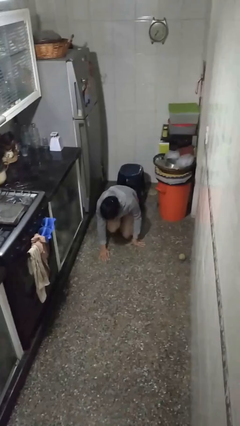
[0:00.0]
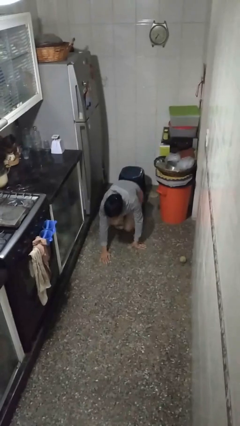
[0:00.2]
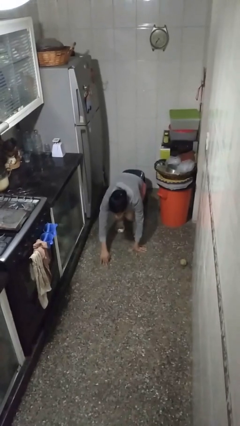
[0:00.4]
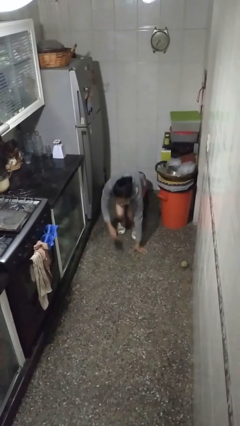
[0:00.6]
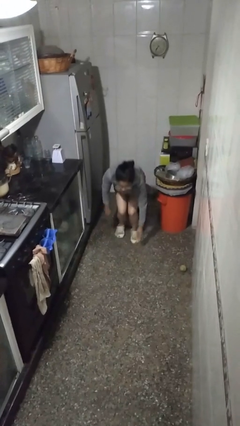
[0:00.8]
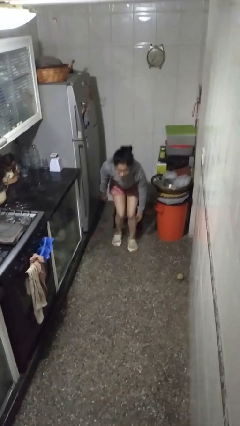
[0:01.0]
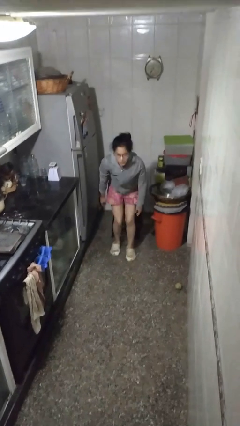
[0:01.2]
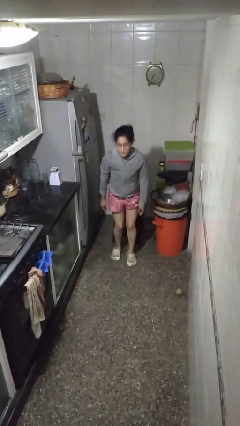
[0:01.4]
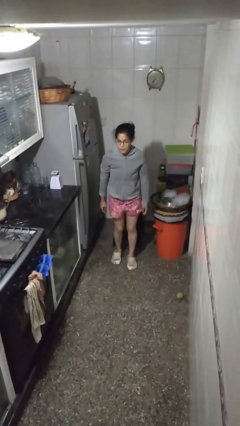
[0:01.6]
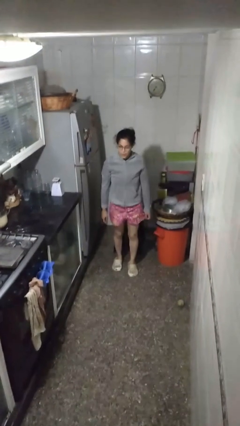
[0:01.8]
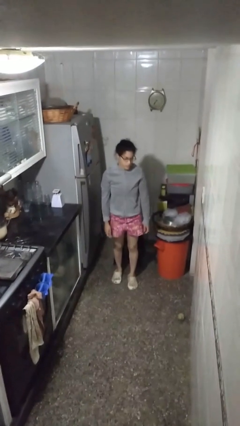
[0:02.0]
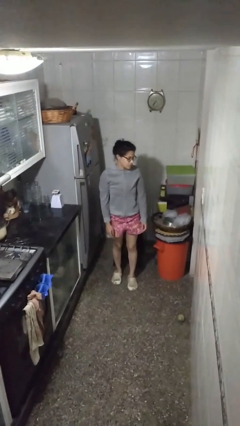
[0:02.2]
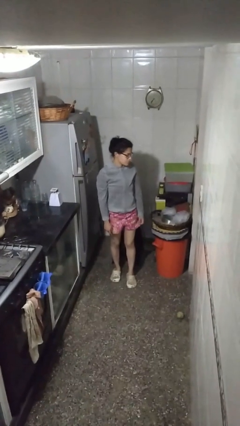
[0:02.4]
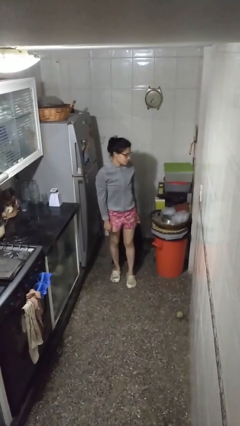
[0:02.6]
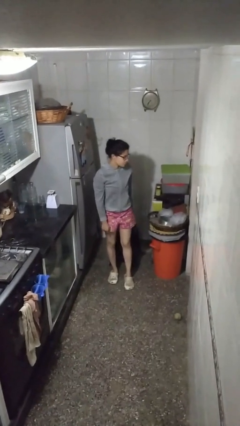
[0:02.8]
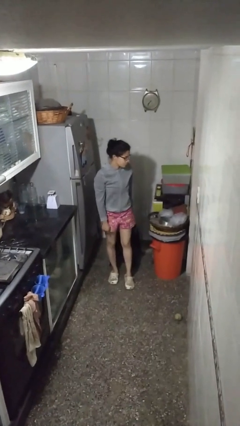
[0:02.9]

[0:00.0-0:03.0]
person stands up from floor

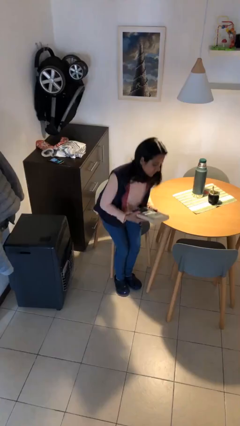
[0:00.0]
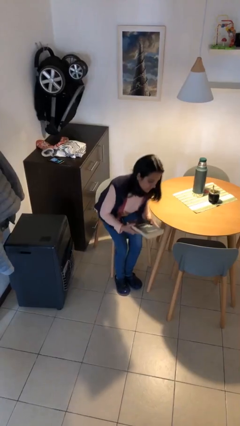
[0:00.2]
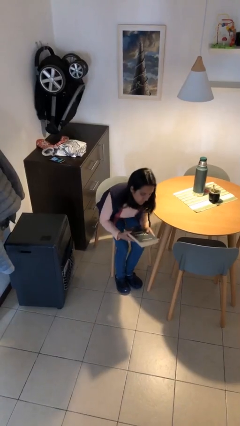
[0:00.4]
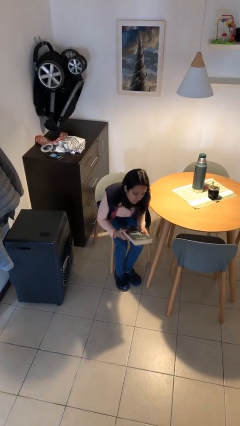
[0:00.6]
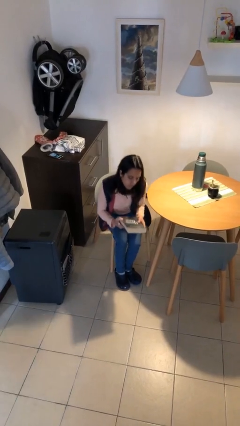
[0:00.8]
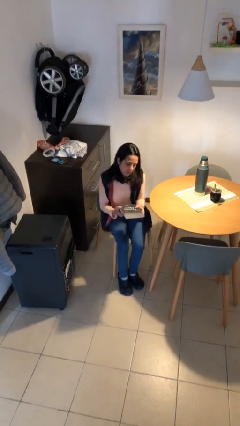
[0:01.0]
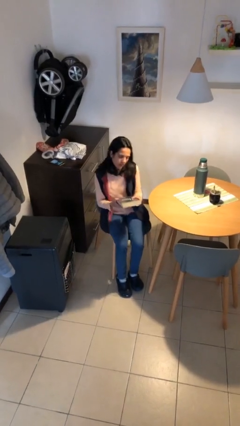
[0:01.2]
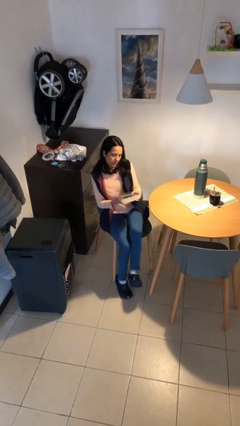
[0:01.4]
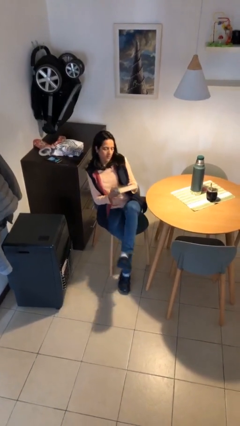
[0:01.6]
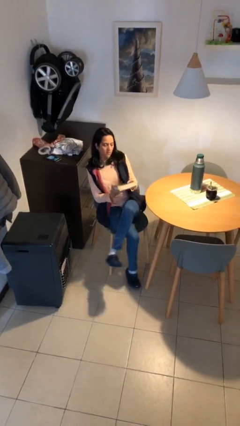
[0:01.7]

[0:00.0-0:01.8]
person sits down

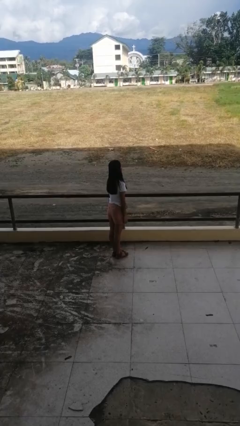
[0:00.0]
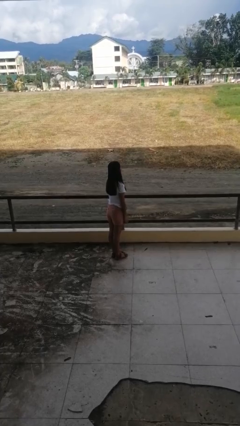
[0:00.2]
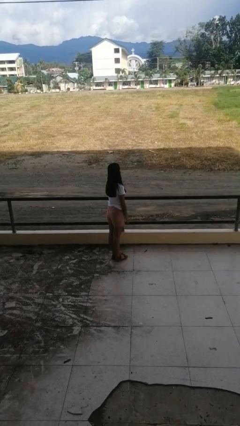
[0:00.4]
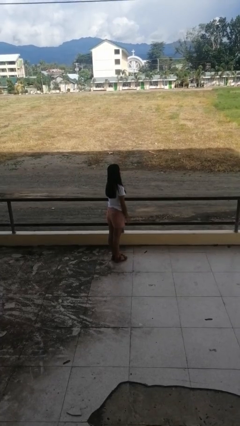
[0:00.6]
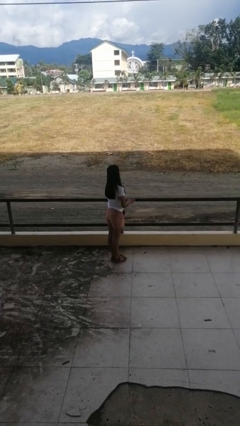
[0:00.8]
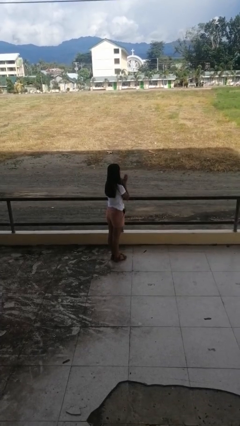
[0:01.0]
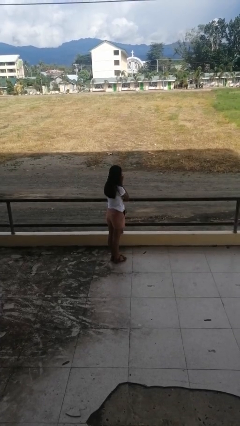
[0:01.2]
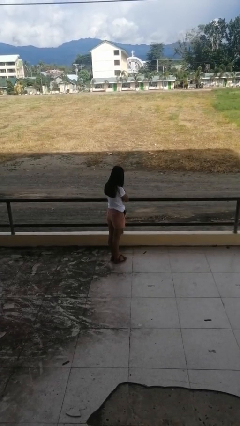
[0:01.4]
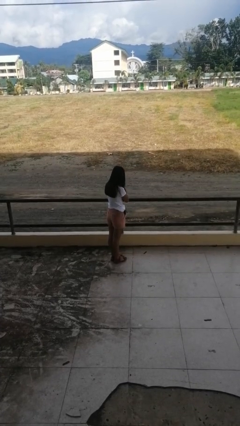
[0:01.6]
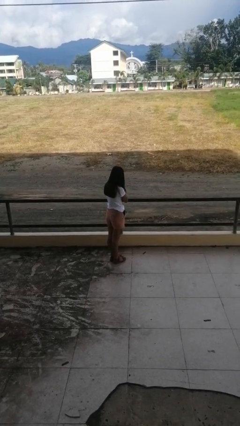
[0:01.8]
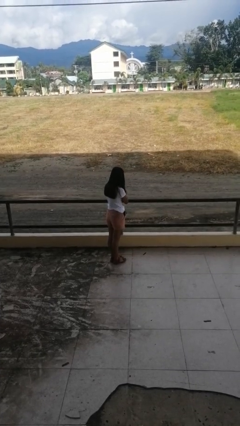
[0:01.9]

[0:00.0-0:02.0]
person sneezes into hand

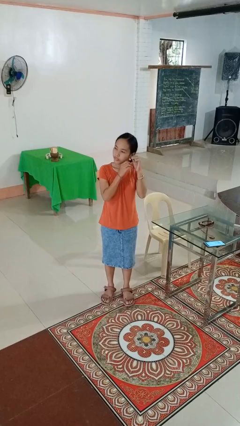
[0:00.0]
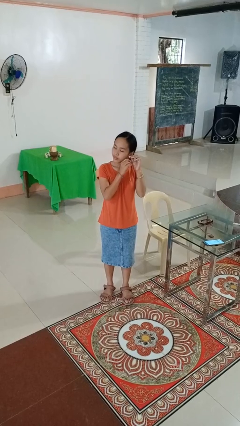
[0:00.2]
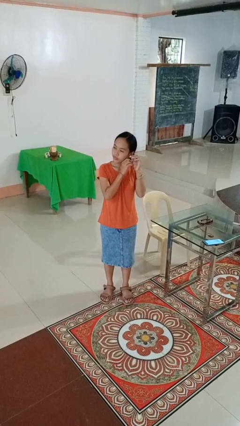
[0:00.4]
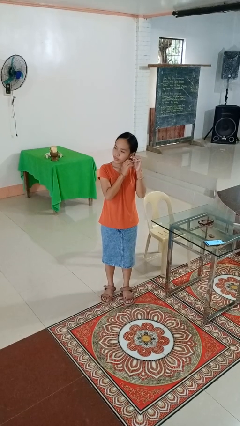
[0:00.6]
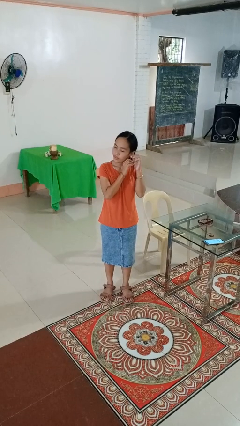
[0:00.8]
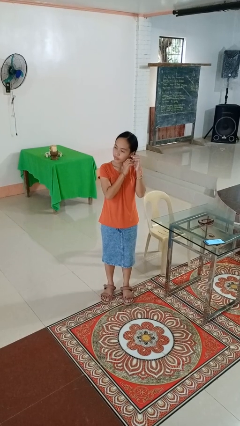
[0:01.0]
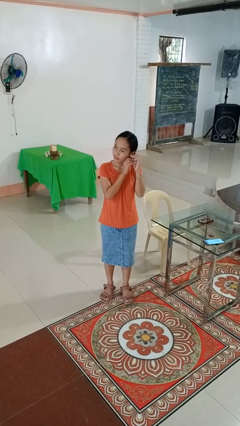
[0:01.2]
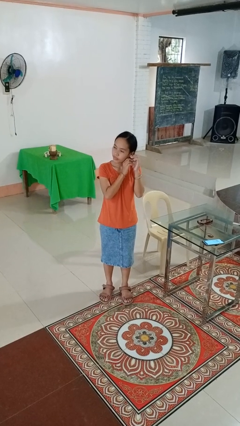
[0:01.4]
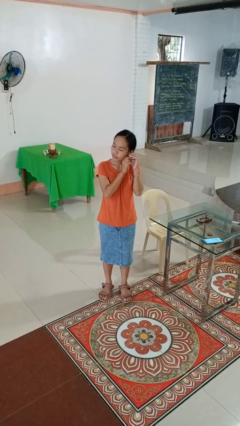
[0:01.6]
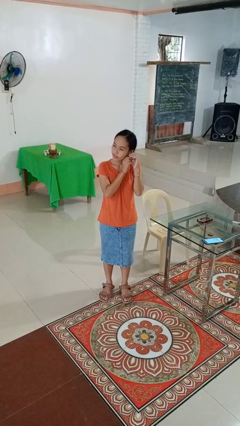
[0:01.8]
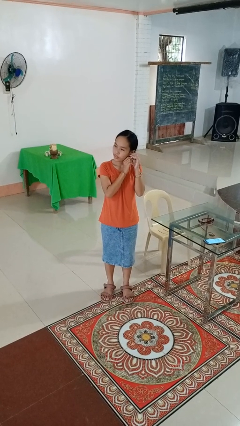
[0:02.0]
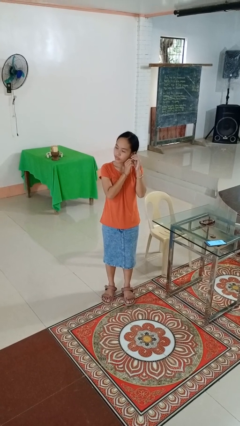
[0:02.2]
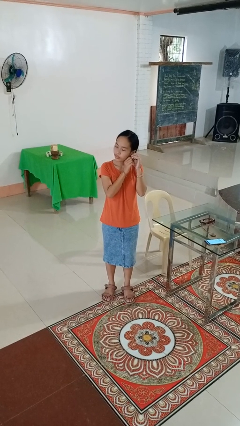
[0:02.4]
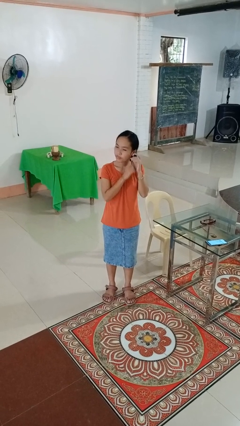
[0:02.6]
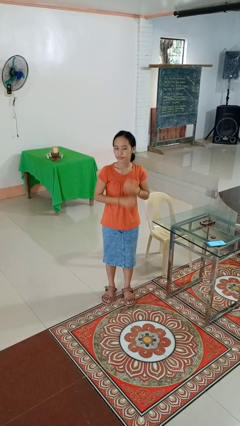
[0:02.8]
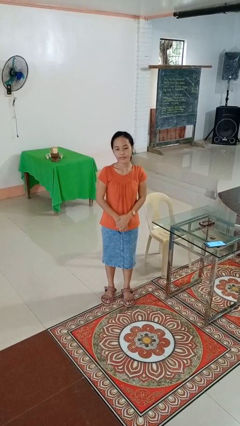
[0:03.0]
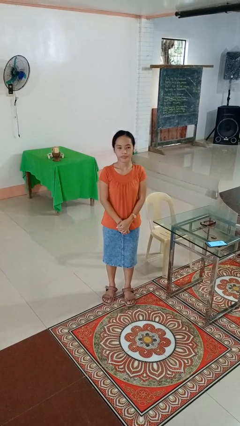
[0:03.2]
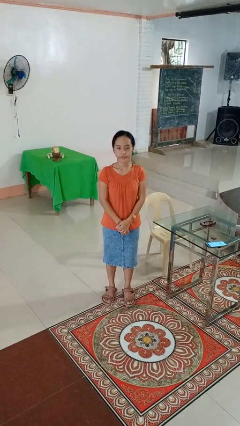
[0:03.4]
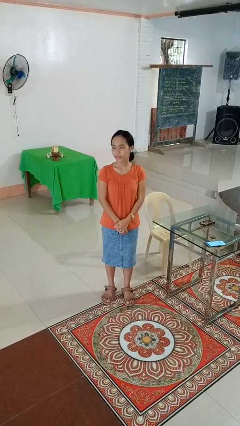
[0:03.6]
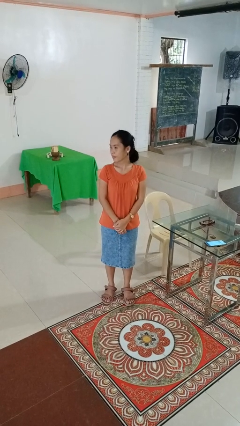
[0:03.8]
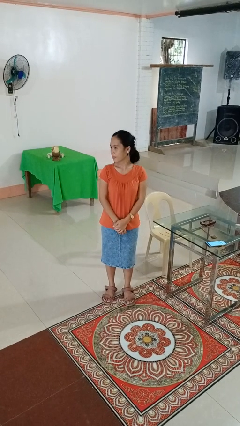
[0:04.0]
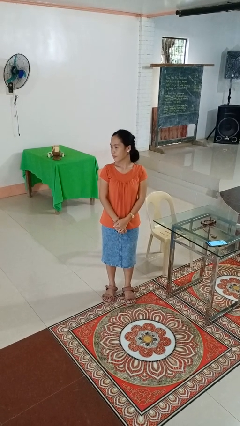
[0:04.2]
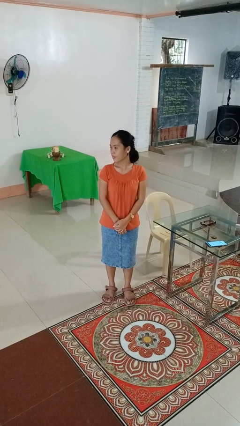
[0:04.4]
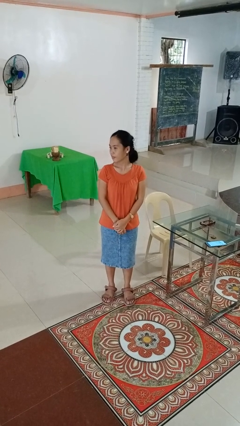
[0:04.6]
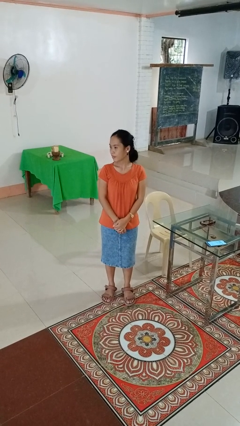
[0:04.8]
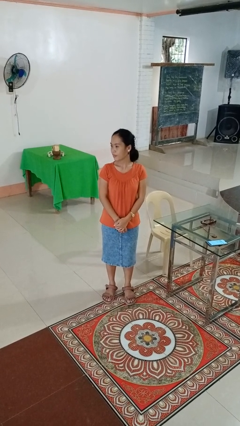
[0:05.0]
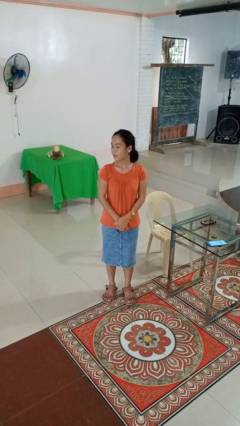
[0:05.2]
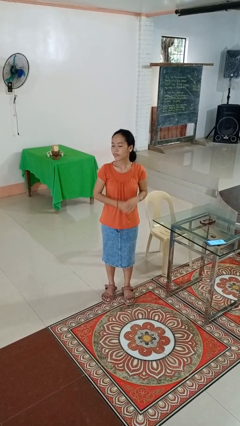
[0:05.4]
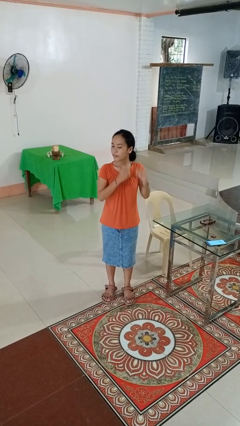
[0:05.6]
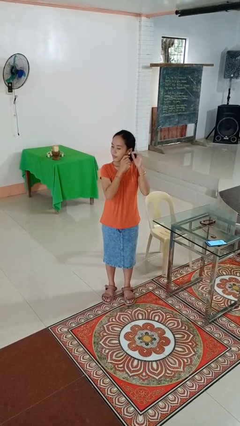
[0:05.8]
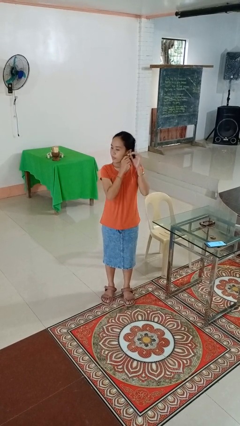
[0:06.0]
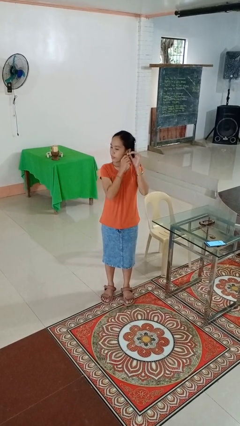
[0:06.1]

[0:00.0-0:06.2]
person puts on earrings

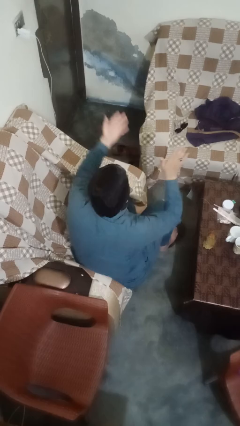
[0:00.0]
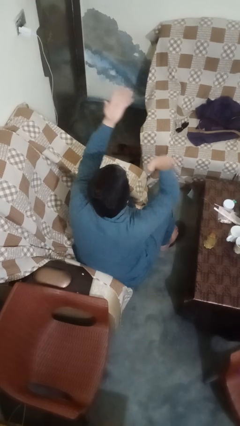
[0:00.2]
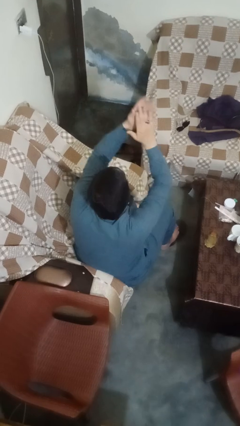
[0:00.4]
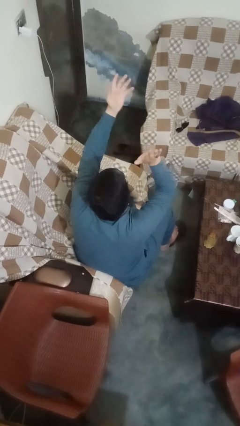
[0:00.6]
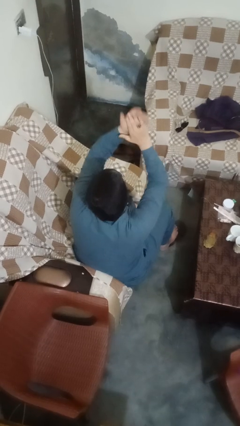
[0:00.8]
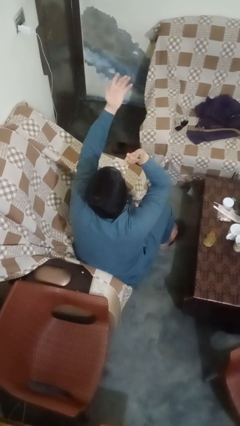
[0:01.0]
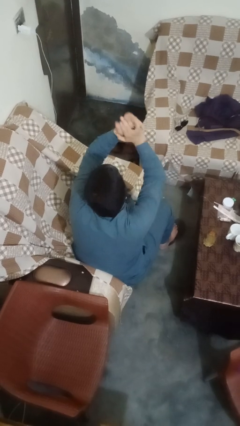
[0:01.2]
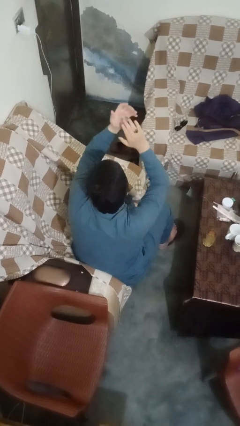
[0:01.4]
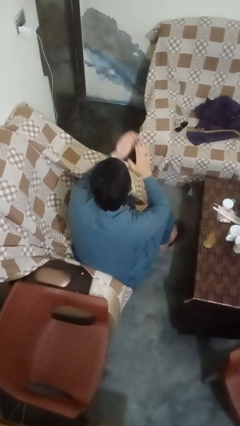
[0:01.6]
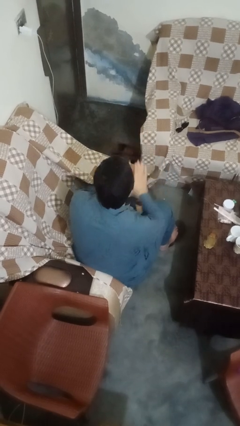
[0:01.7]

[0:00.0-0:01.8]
person claps hands

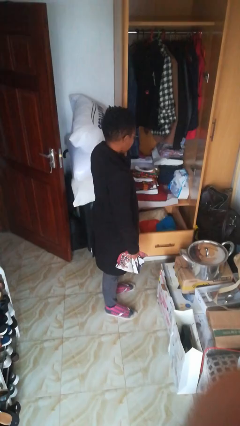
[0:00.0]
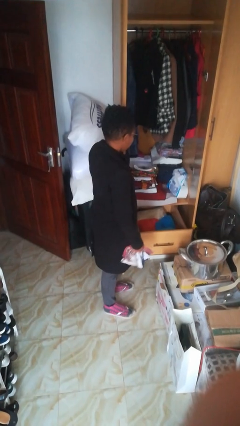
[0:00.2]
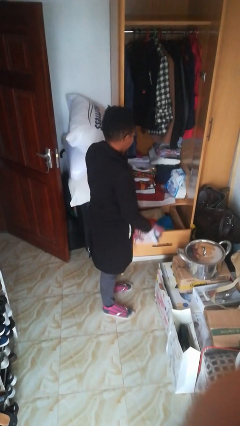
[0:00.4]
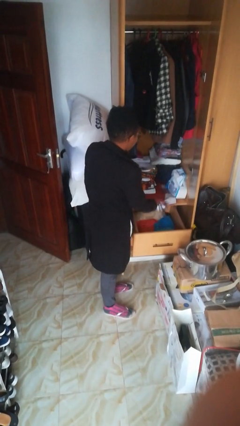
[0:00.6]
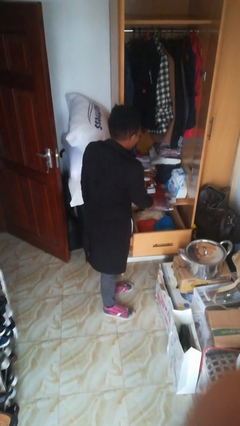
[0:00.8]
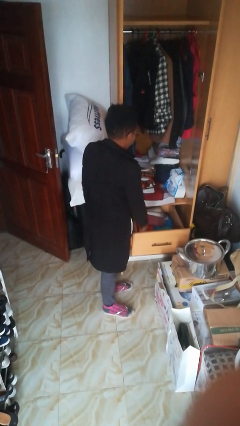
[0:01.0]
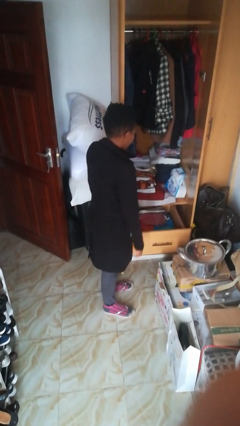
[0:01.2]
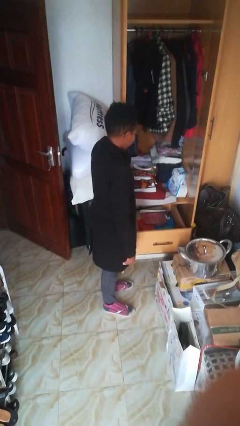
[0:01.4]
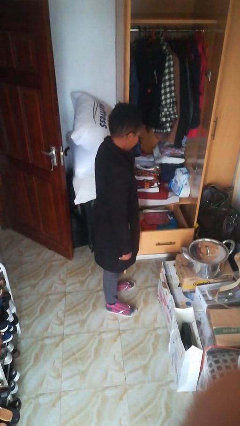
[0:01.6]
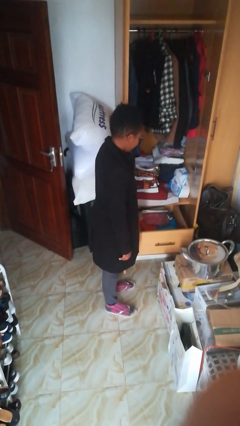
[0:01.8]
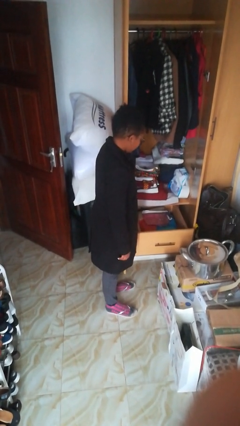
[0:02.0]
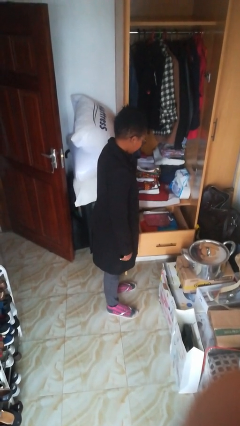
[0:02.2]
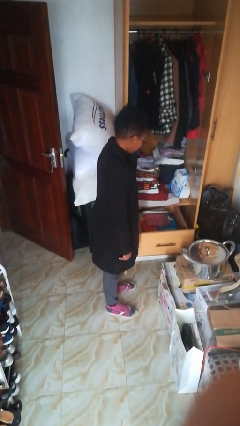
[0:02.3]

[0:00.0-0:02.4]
person puts clothes into dresser

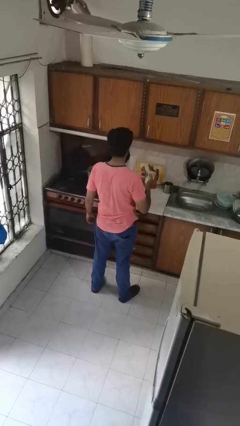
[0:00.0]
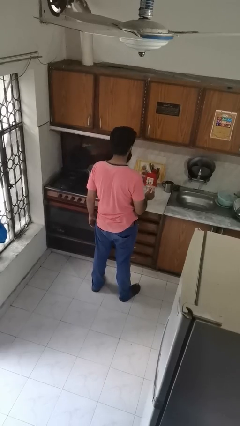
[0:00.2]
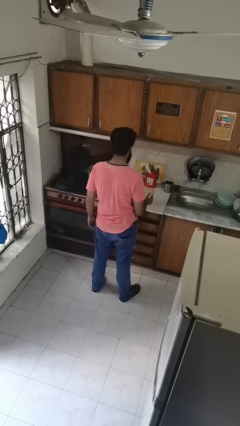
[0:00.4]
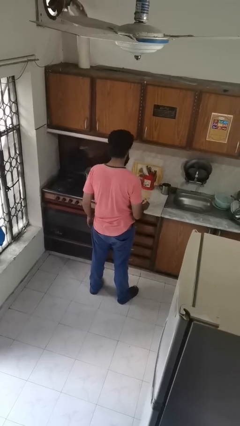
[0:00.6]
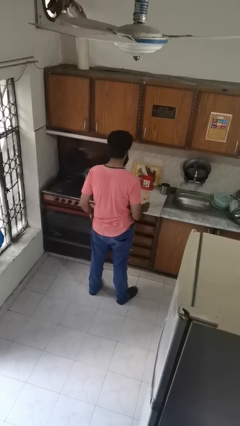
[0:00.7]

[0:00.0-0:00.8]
person puts down object on shelf
